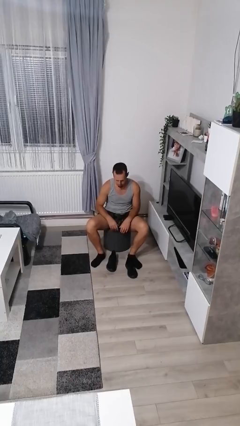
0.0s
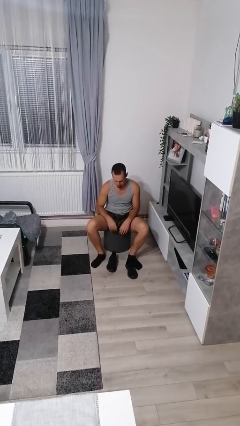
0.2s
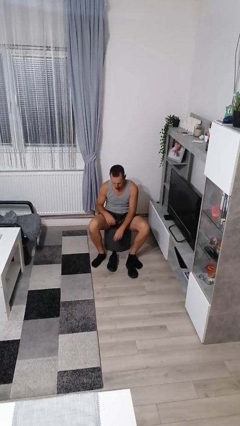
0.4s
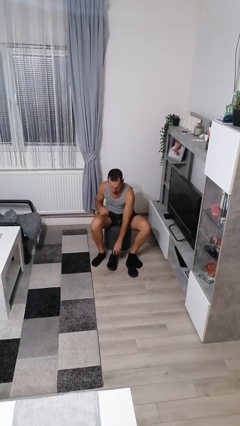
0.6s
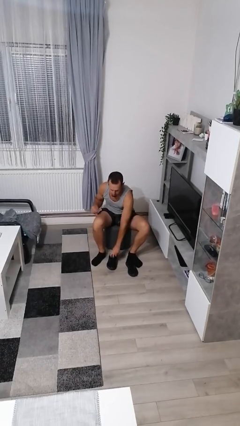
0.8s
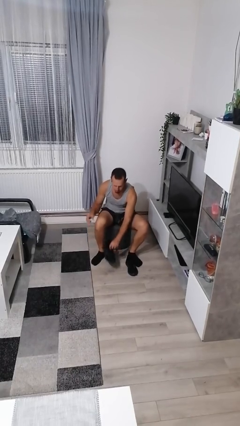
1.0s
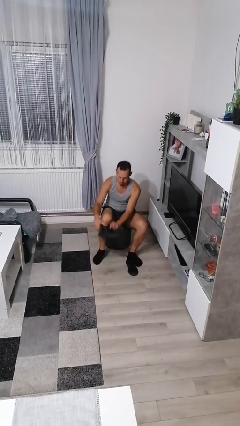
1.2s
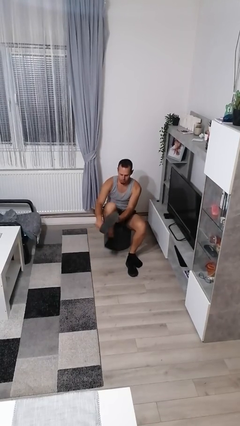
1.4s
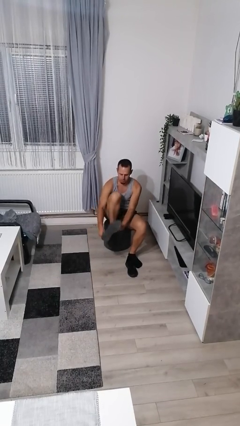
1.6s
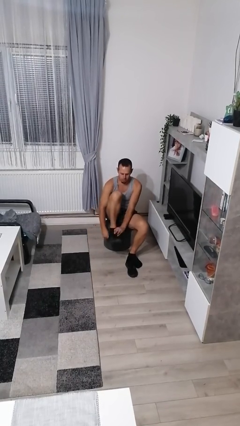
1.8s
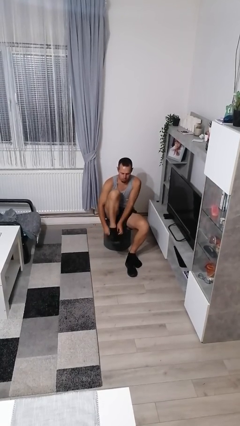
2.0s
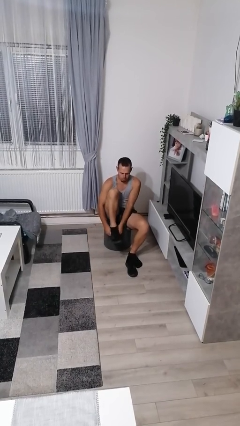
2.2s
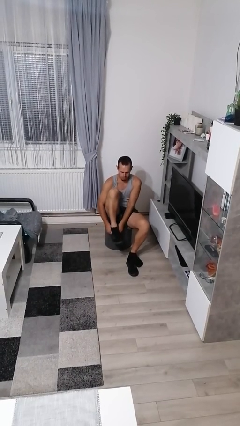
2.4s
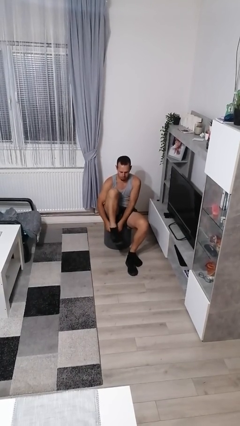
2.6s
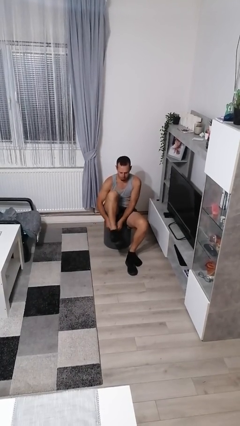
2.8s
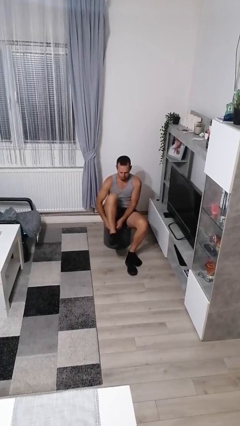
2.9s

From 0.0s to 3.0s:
person puts on shoes

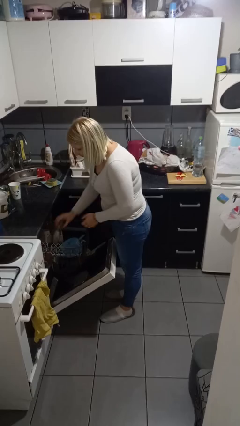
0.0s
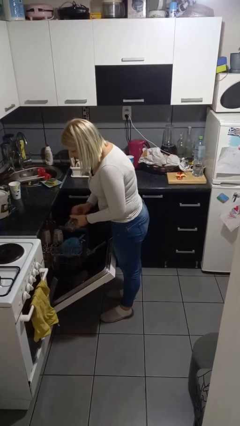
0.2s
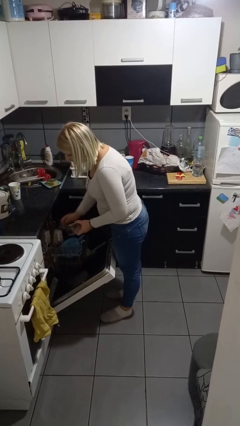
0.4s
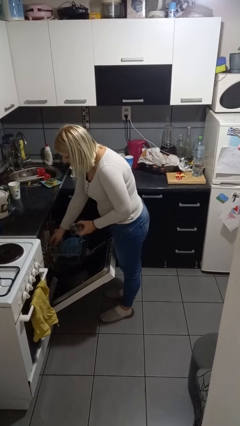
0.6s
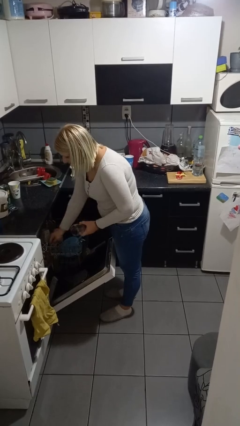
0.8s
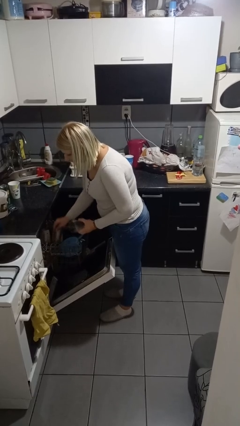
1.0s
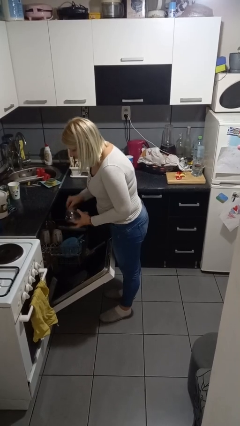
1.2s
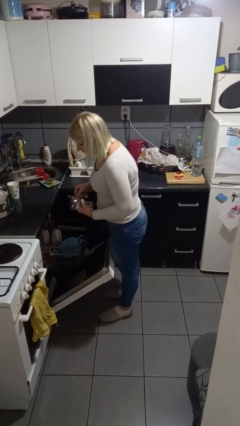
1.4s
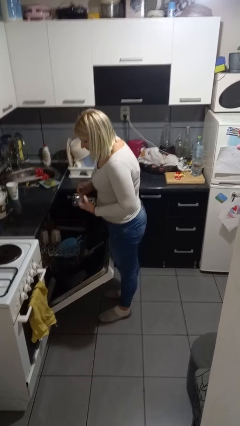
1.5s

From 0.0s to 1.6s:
person unloads dishwasher

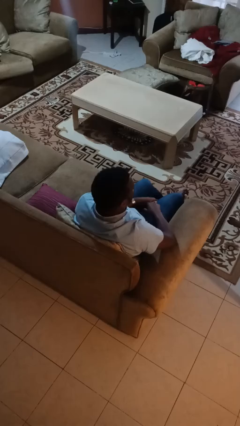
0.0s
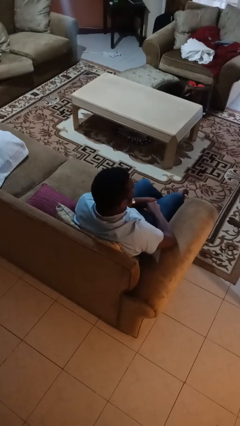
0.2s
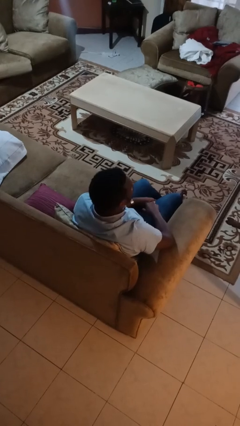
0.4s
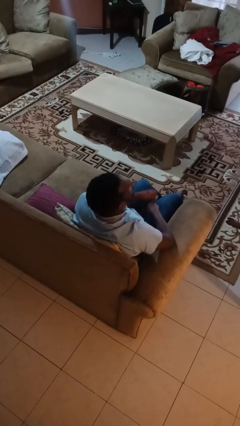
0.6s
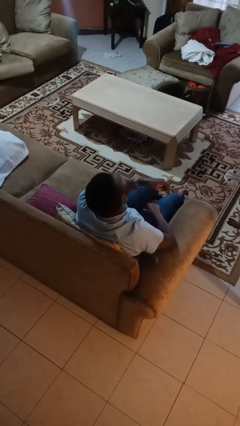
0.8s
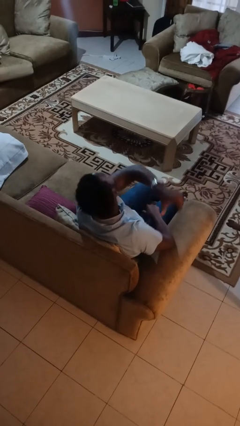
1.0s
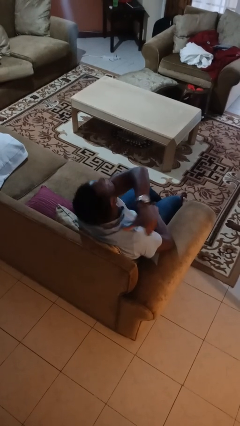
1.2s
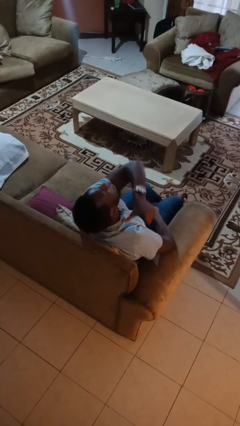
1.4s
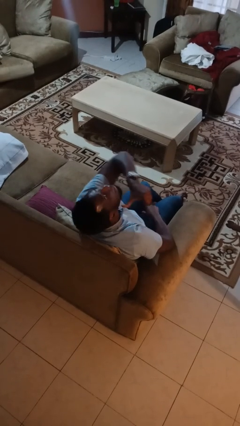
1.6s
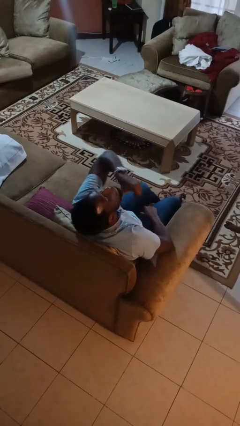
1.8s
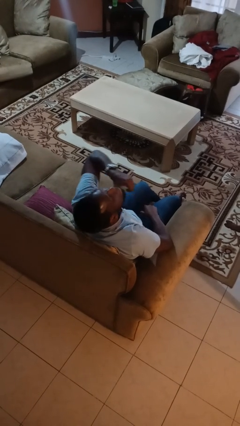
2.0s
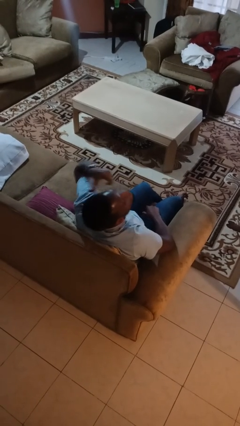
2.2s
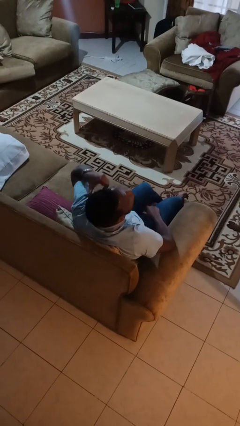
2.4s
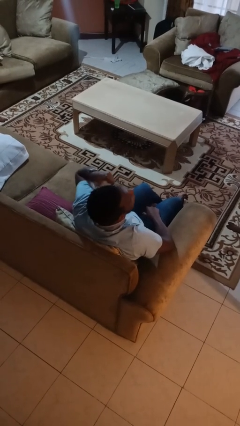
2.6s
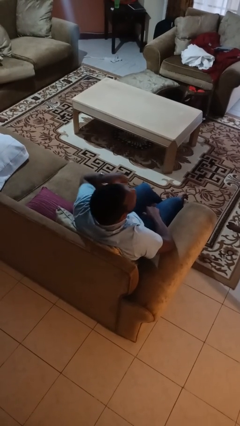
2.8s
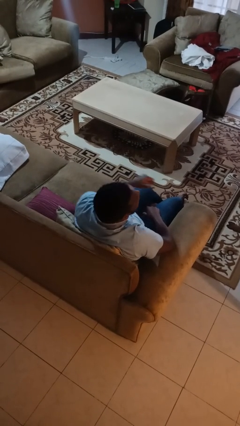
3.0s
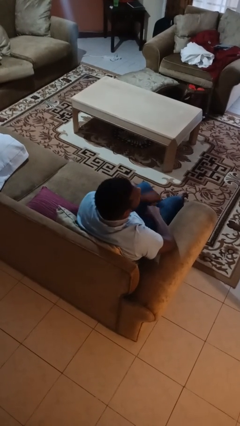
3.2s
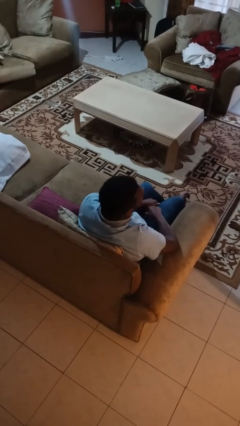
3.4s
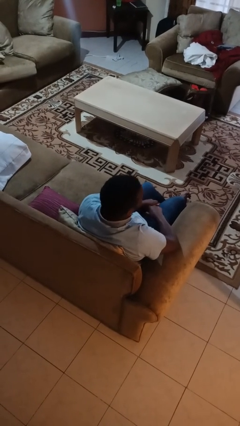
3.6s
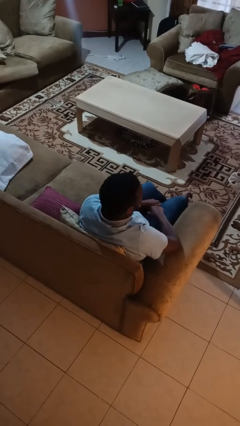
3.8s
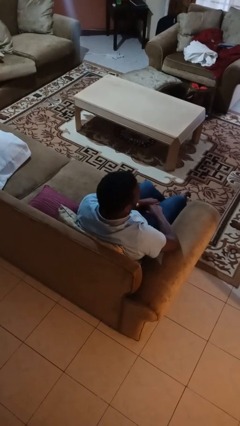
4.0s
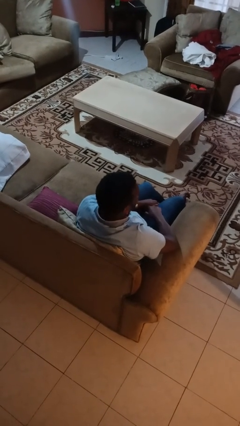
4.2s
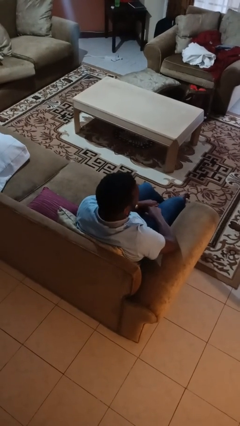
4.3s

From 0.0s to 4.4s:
person gestures cut

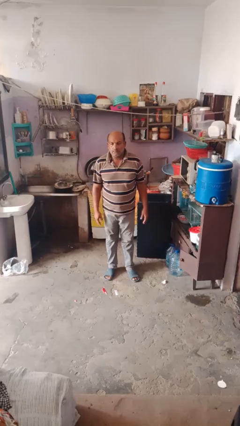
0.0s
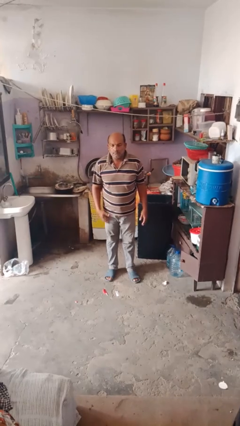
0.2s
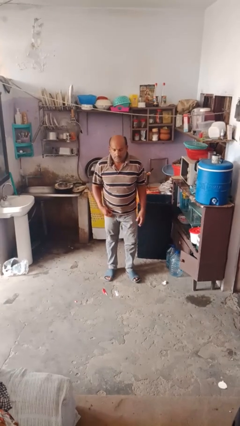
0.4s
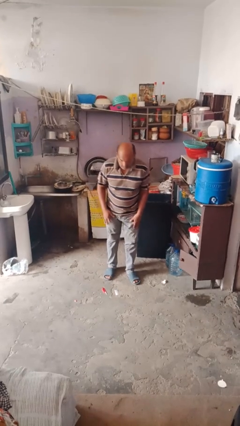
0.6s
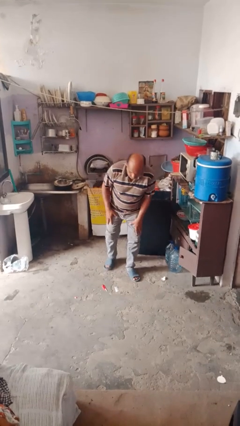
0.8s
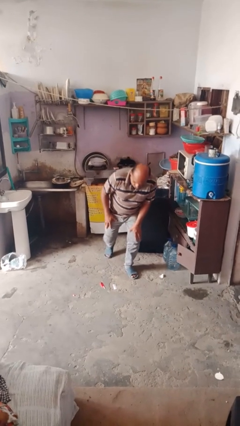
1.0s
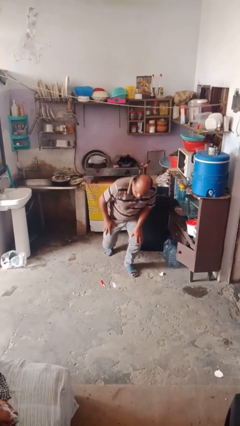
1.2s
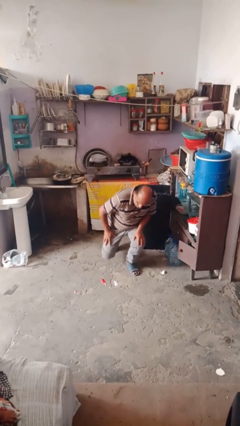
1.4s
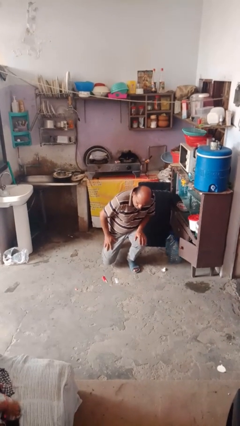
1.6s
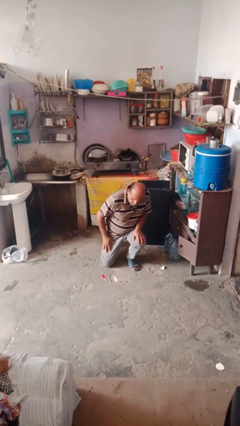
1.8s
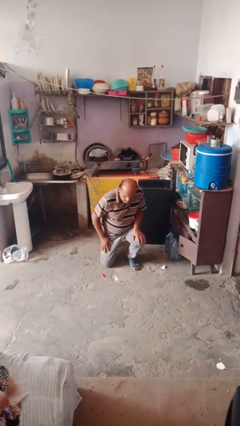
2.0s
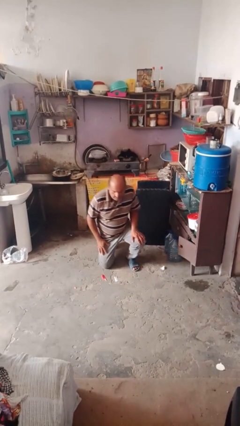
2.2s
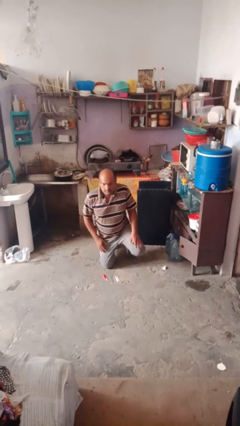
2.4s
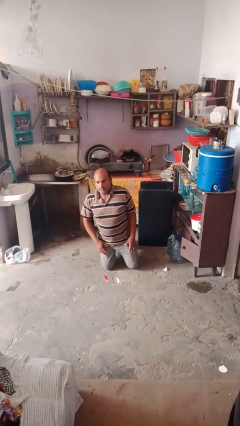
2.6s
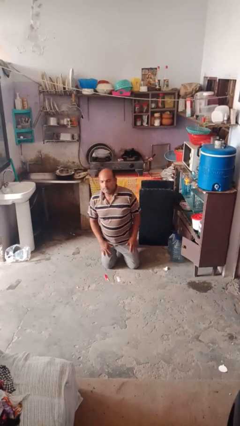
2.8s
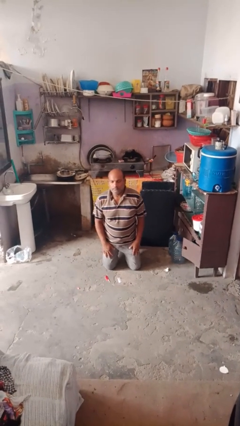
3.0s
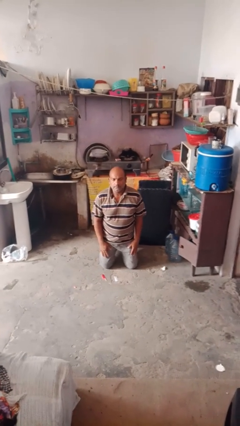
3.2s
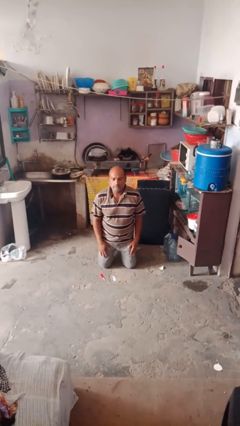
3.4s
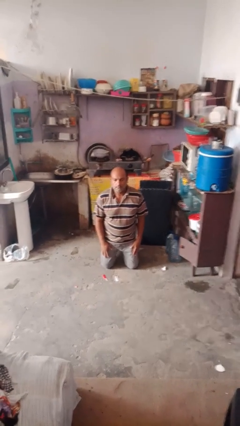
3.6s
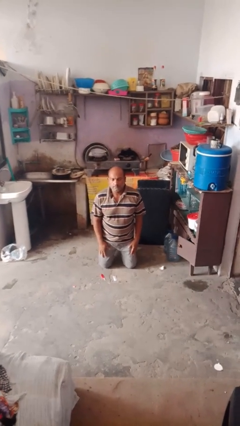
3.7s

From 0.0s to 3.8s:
person kneels

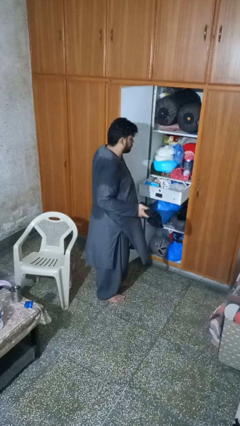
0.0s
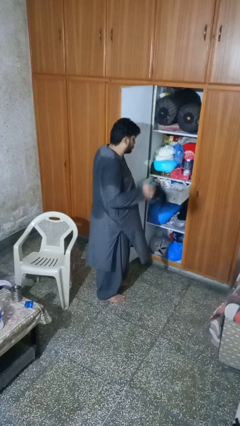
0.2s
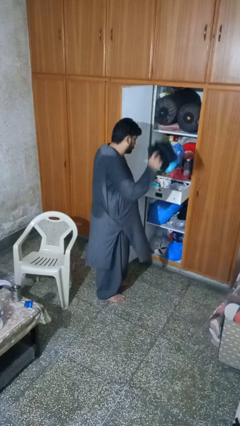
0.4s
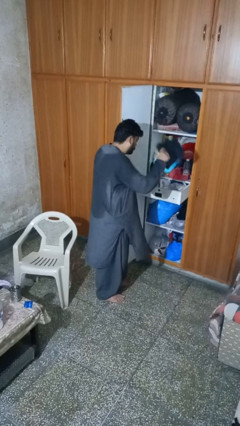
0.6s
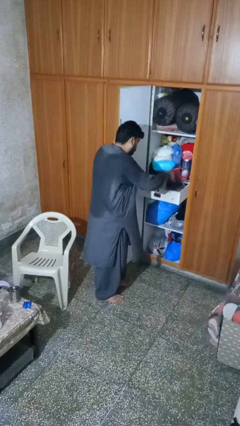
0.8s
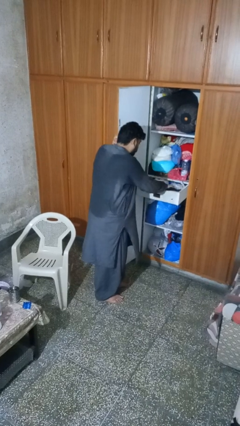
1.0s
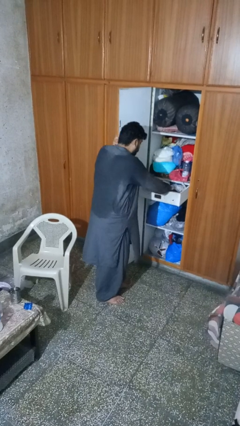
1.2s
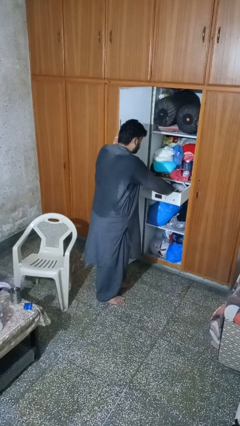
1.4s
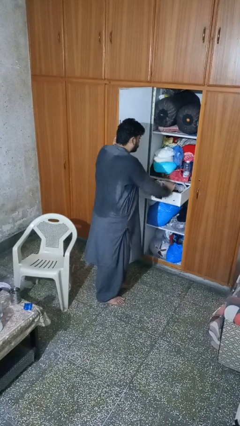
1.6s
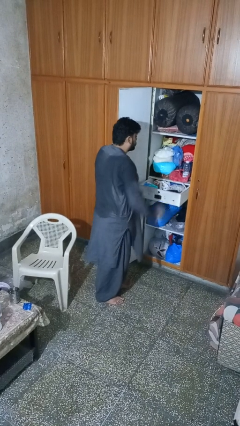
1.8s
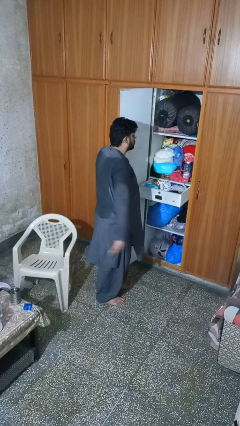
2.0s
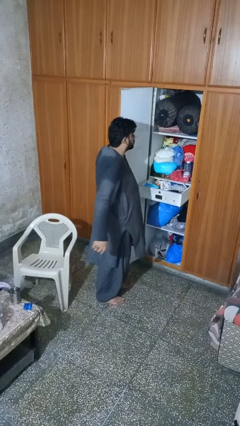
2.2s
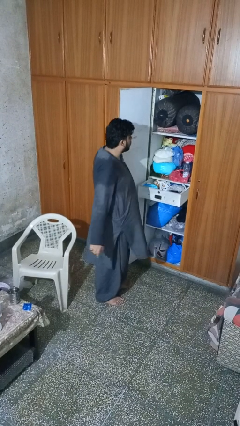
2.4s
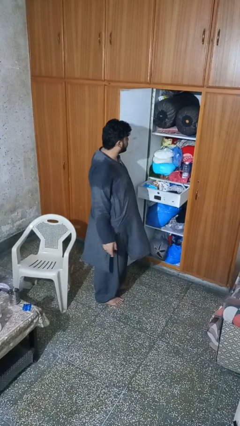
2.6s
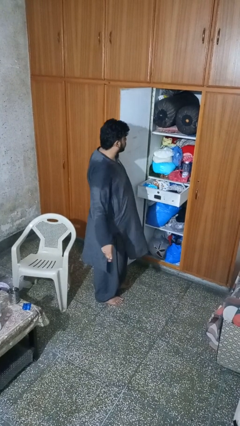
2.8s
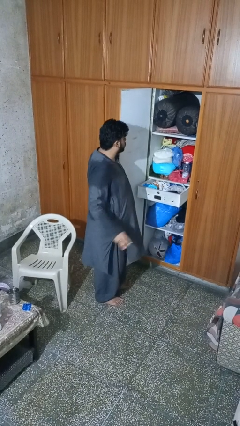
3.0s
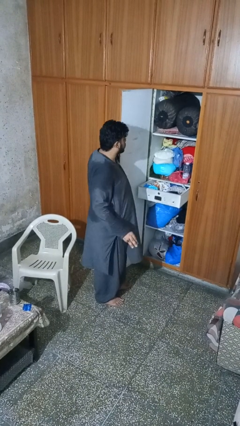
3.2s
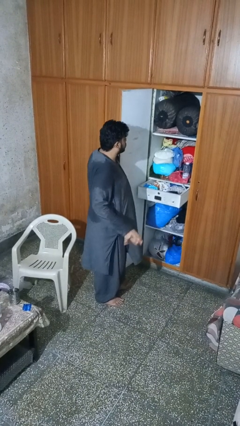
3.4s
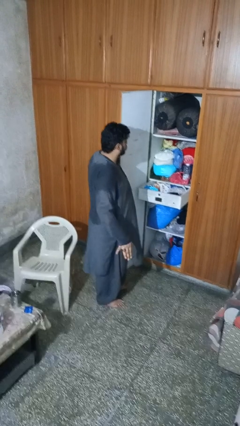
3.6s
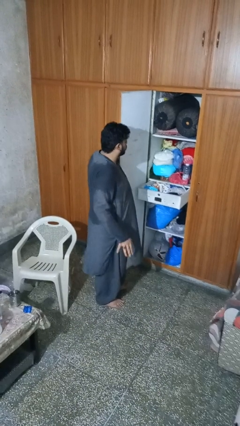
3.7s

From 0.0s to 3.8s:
person puts clothes into dresser

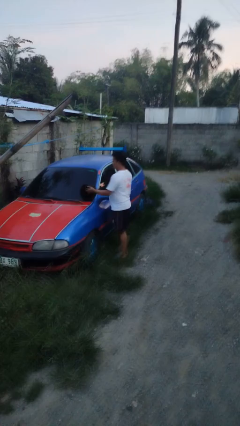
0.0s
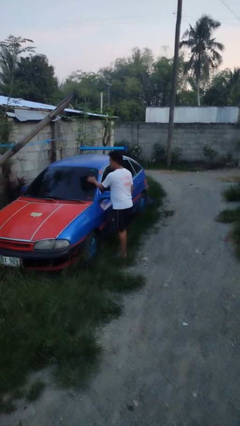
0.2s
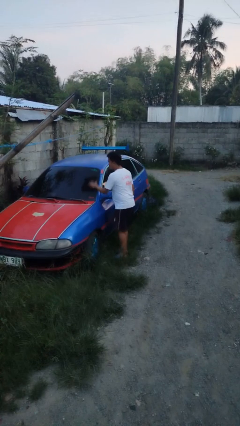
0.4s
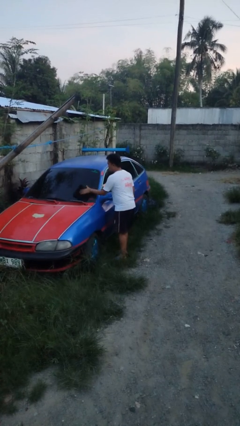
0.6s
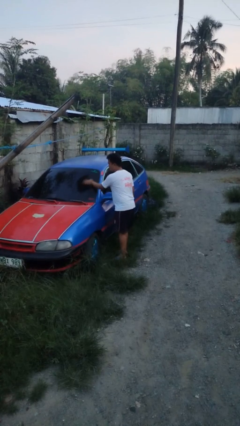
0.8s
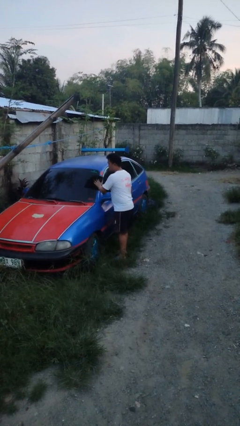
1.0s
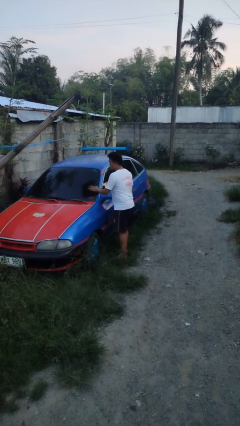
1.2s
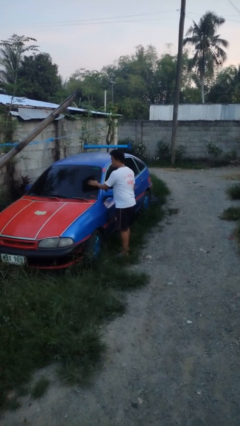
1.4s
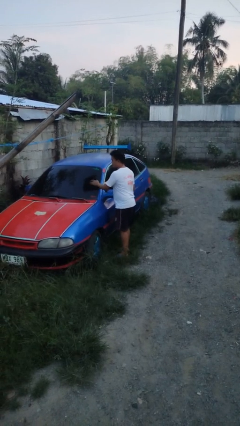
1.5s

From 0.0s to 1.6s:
person polishes car with rag
